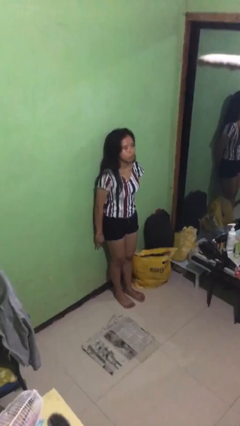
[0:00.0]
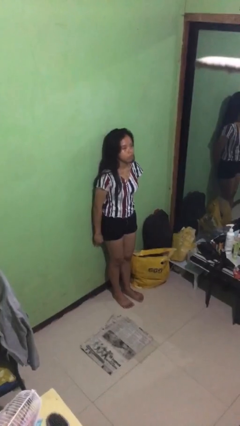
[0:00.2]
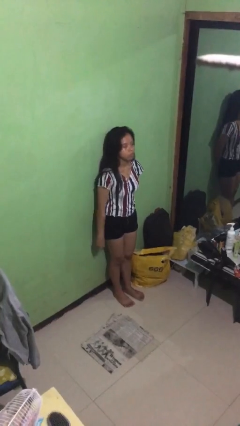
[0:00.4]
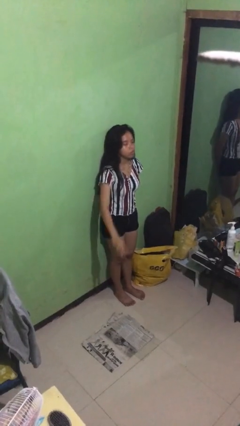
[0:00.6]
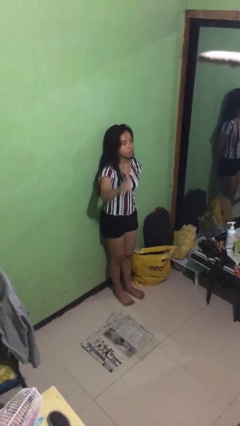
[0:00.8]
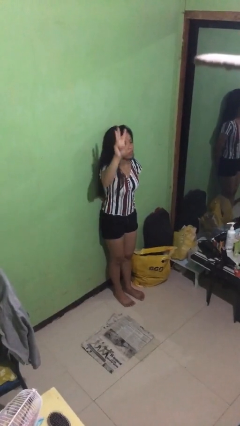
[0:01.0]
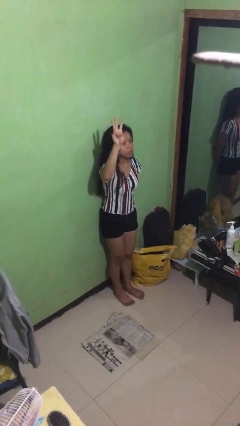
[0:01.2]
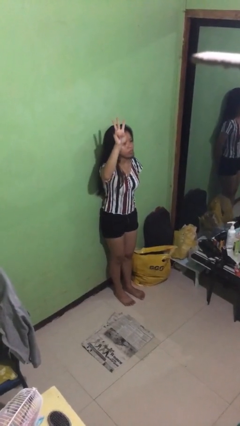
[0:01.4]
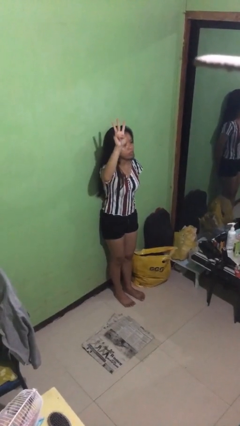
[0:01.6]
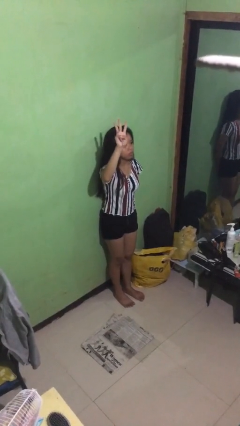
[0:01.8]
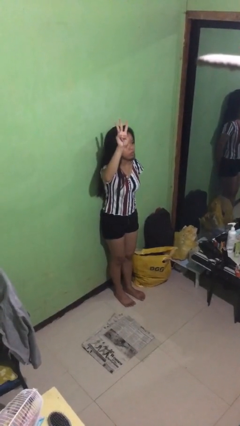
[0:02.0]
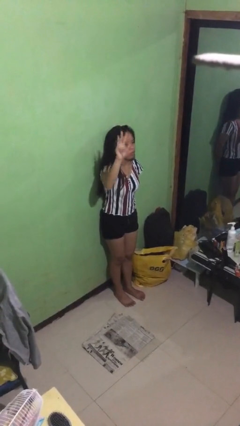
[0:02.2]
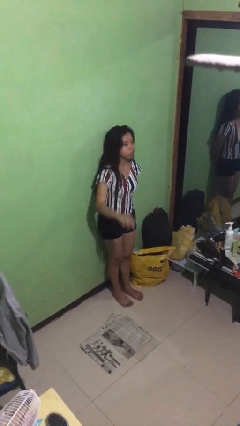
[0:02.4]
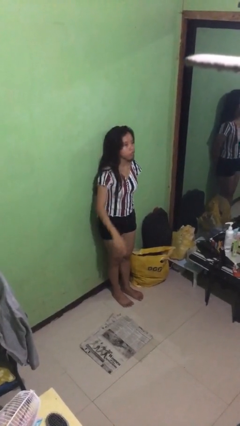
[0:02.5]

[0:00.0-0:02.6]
person gestures number three

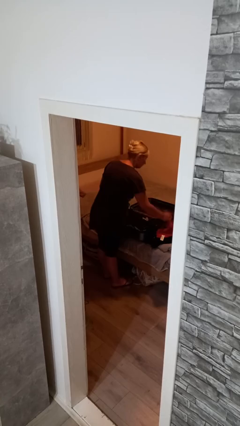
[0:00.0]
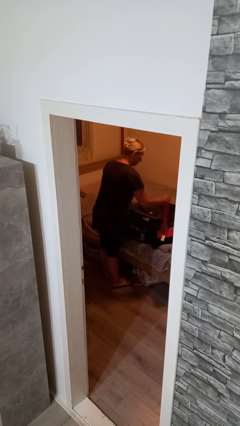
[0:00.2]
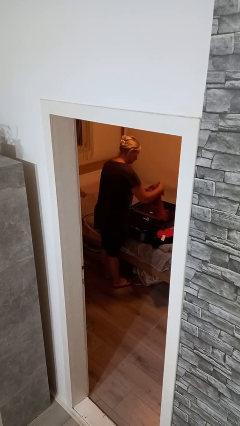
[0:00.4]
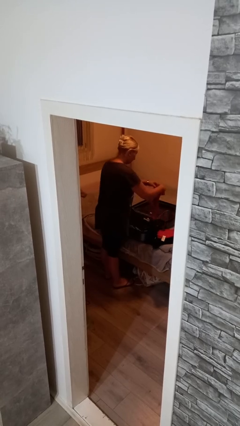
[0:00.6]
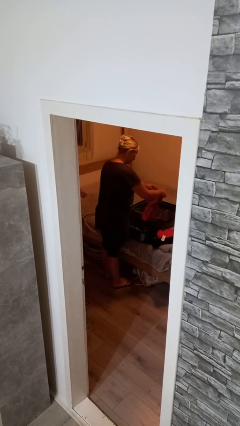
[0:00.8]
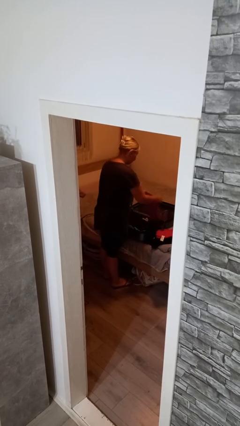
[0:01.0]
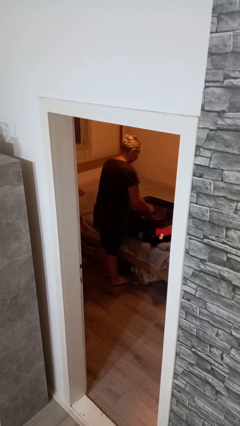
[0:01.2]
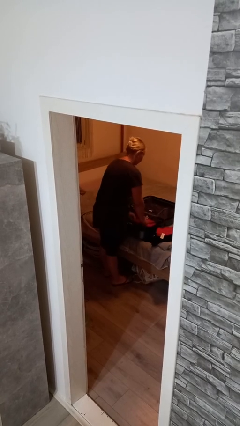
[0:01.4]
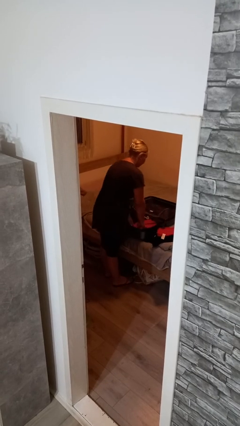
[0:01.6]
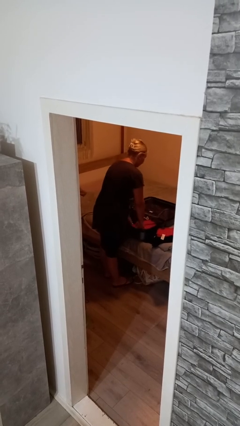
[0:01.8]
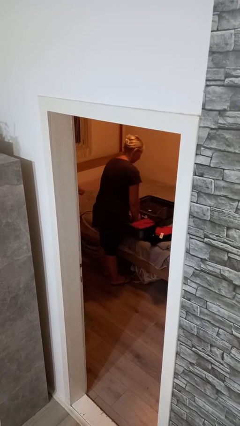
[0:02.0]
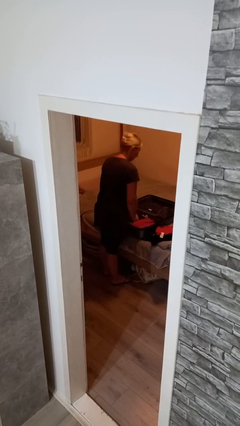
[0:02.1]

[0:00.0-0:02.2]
person loads clothes into suitcase

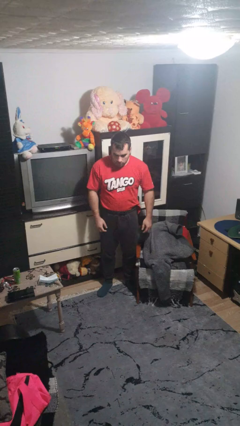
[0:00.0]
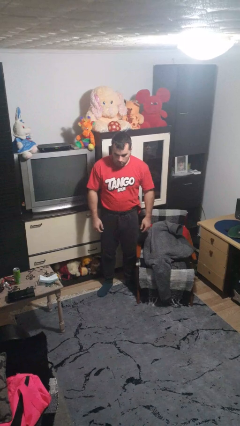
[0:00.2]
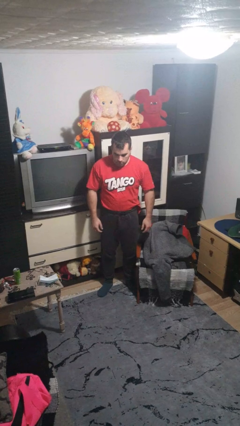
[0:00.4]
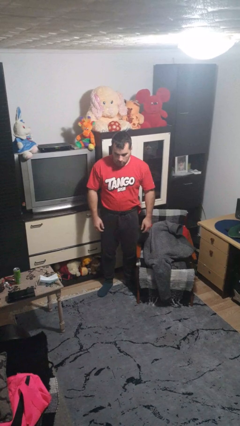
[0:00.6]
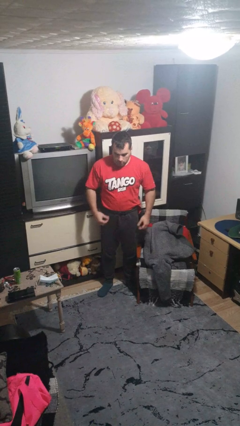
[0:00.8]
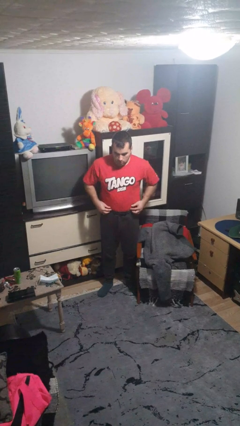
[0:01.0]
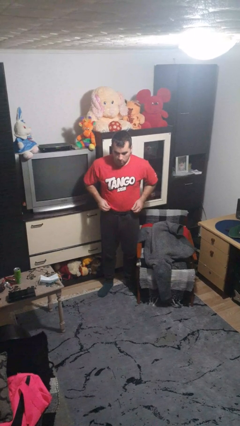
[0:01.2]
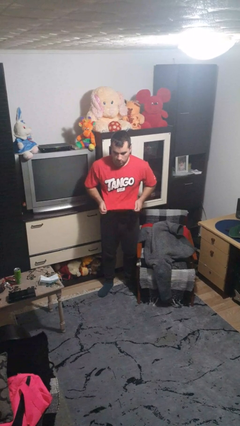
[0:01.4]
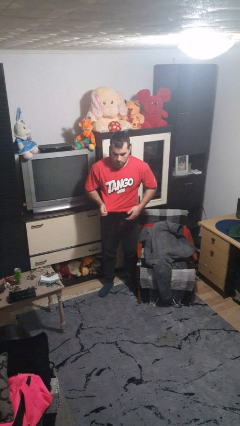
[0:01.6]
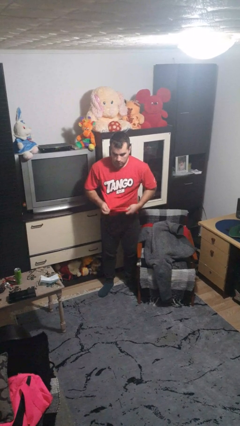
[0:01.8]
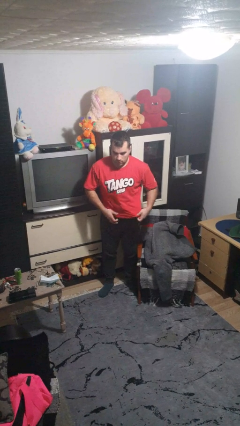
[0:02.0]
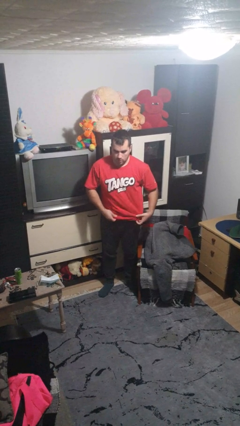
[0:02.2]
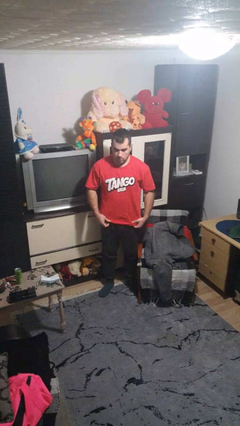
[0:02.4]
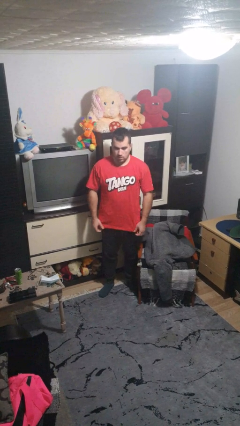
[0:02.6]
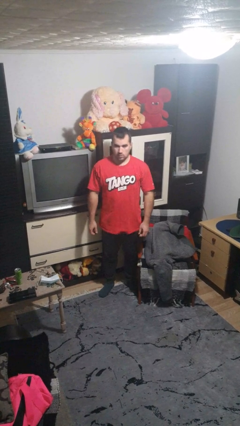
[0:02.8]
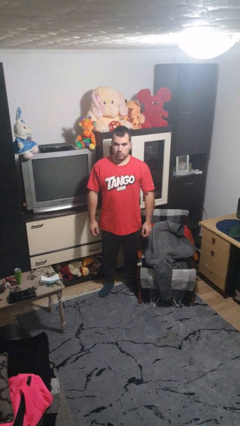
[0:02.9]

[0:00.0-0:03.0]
person untucks shirt

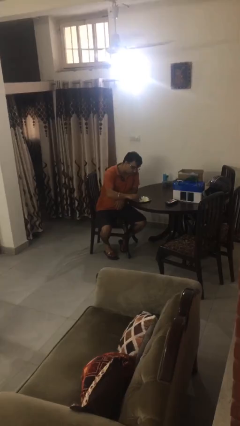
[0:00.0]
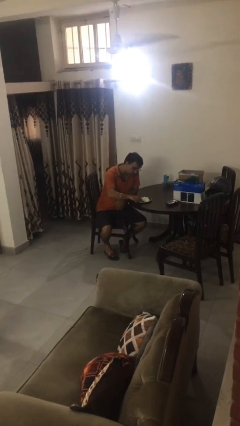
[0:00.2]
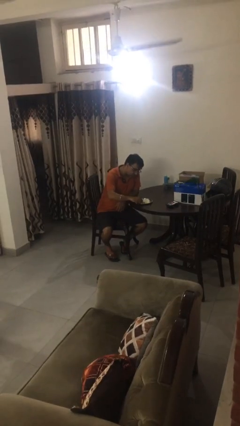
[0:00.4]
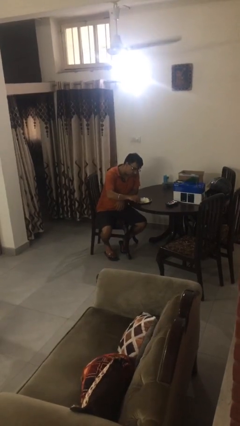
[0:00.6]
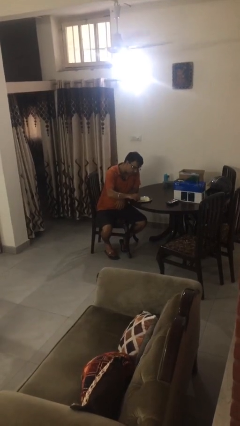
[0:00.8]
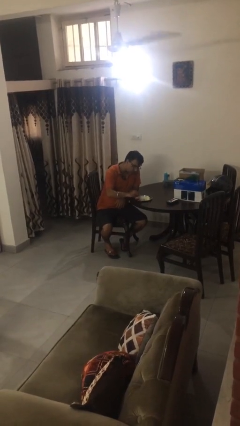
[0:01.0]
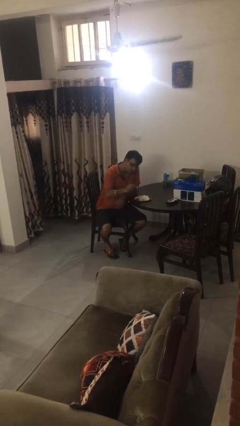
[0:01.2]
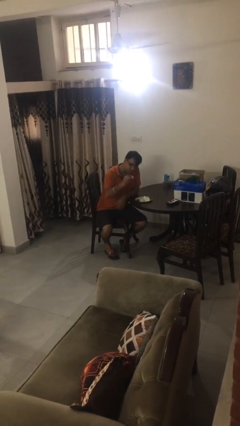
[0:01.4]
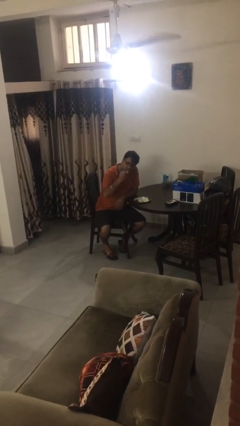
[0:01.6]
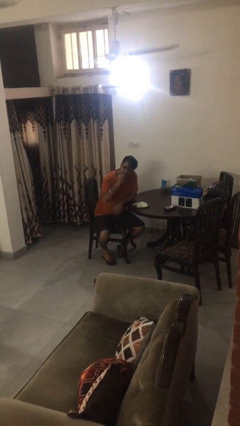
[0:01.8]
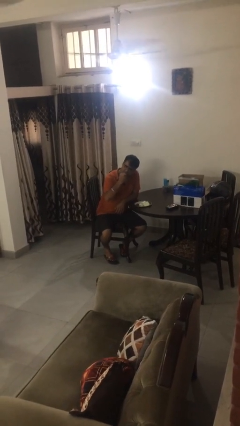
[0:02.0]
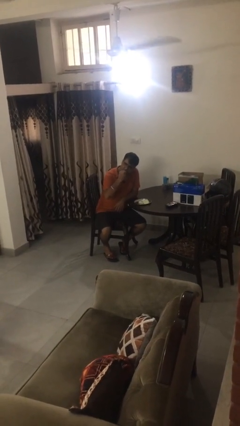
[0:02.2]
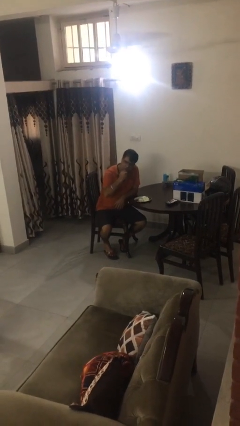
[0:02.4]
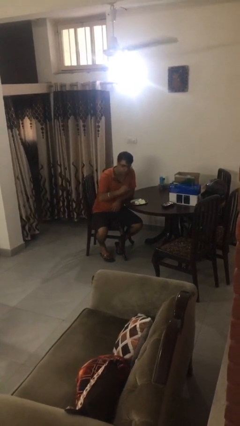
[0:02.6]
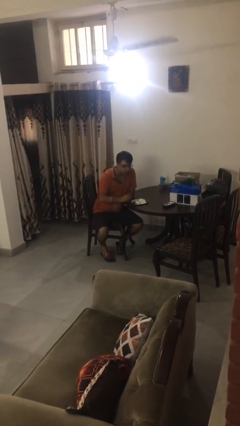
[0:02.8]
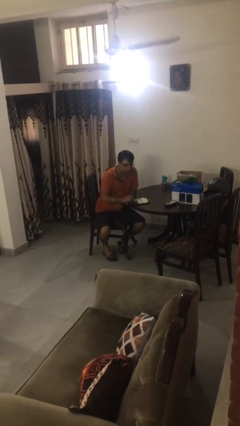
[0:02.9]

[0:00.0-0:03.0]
person eats with hands

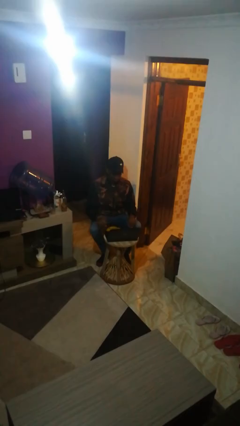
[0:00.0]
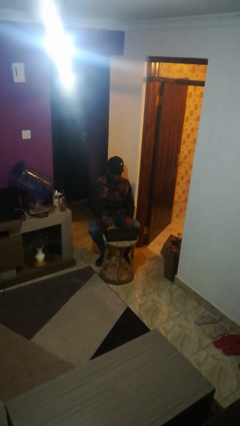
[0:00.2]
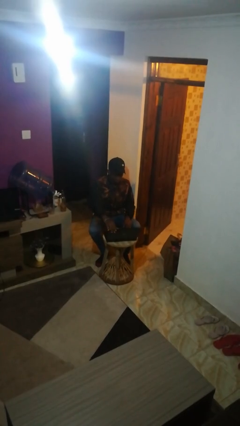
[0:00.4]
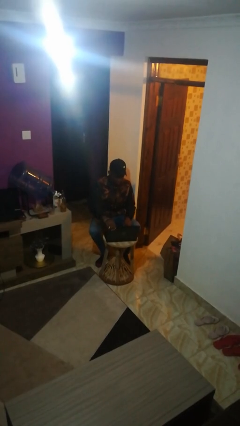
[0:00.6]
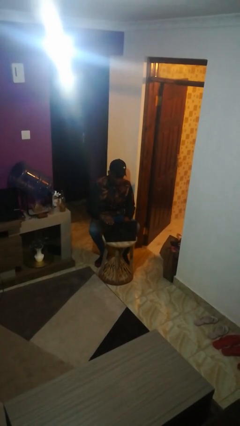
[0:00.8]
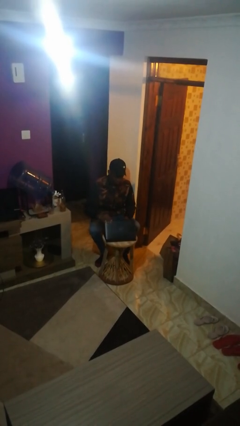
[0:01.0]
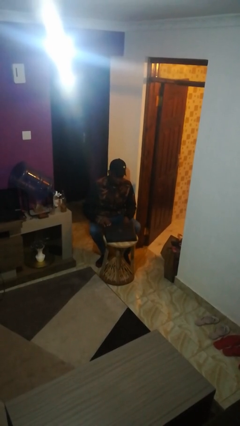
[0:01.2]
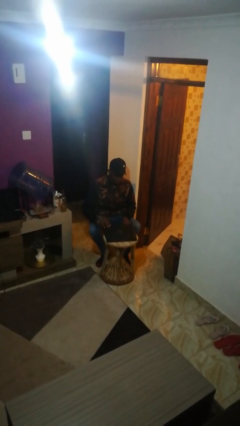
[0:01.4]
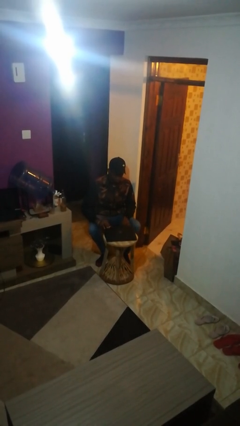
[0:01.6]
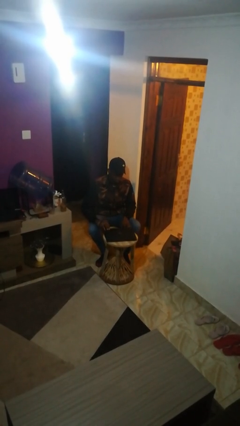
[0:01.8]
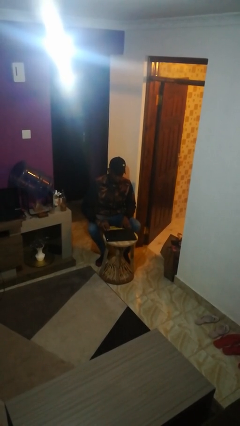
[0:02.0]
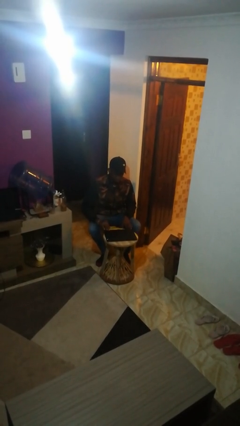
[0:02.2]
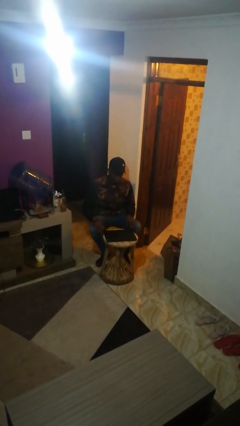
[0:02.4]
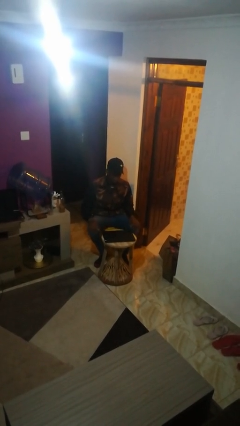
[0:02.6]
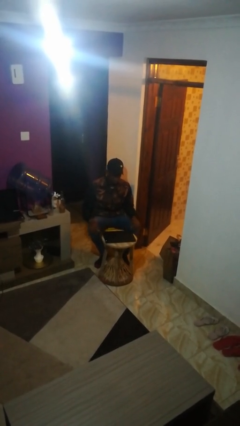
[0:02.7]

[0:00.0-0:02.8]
person closes laptop

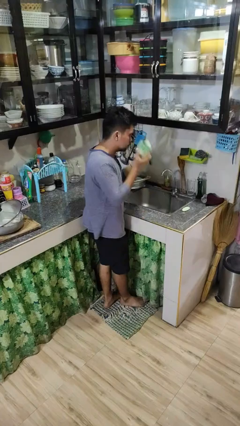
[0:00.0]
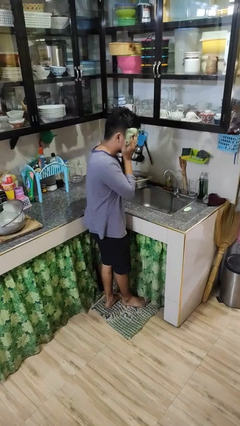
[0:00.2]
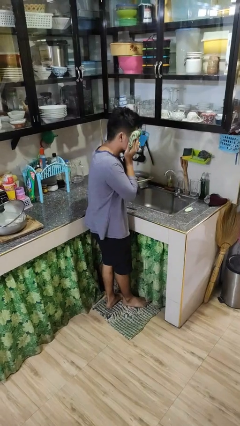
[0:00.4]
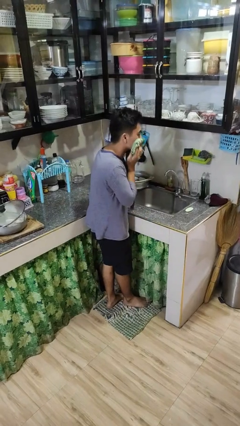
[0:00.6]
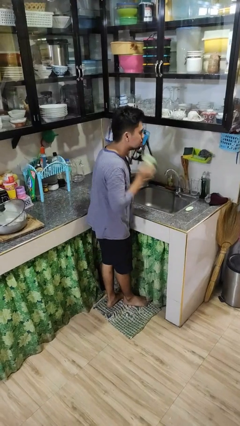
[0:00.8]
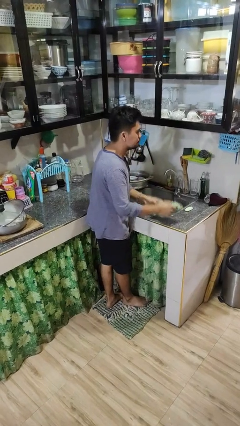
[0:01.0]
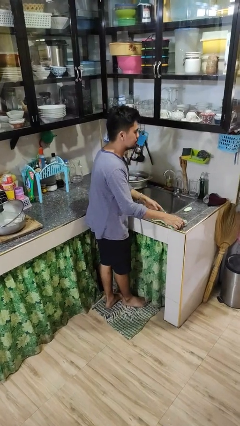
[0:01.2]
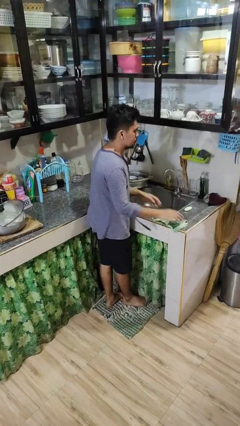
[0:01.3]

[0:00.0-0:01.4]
person dries face with towel

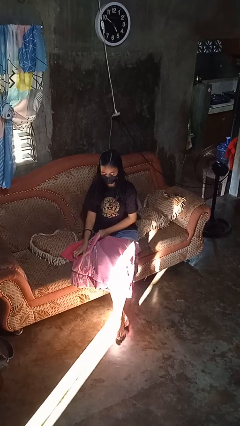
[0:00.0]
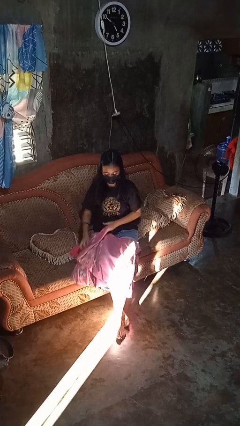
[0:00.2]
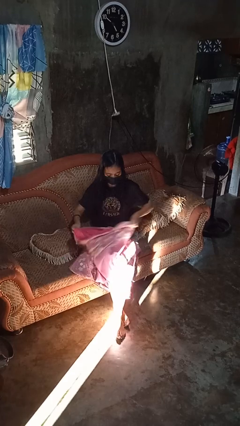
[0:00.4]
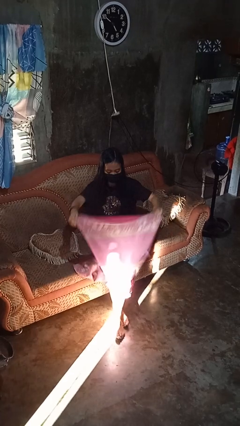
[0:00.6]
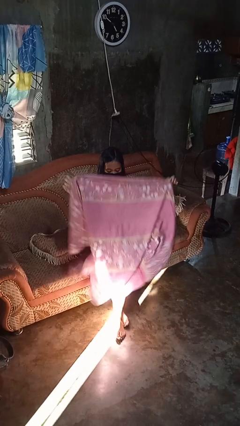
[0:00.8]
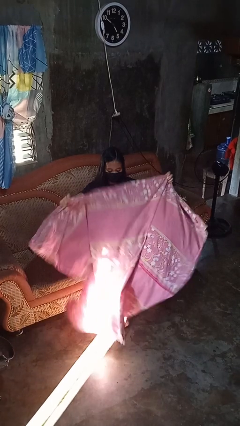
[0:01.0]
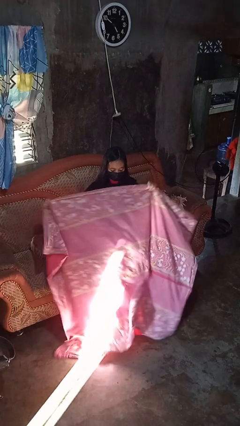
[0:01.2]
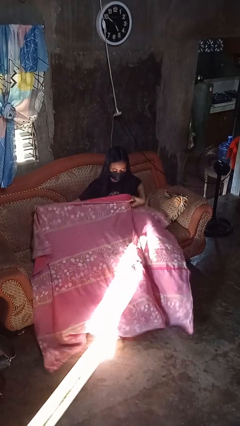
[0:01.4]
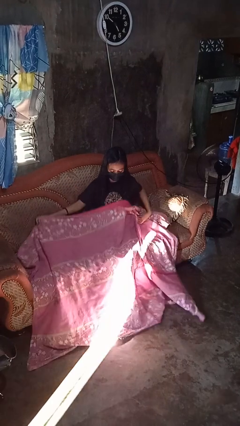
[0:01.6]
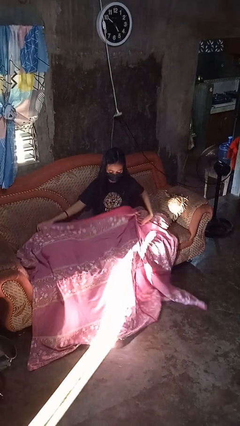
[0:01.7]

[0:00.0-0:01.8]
person unfolds blanket

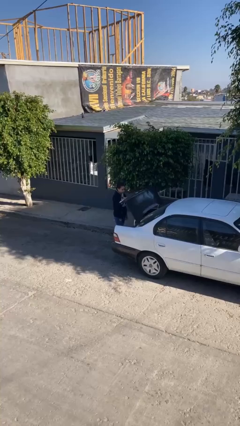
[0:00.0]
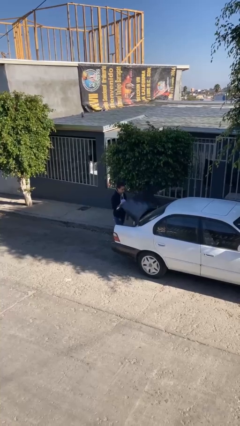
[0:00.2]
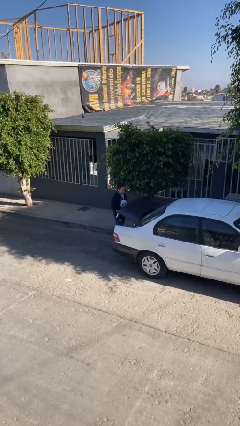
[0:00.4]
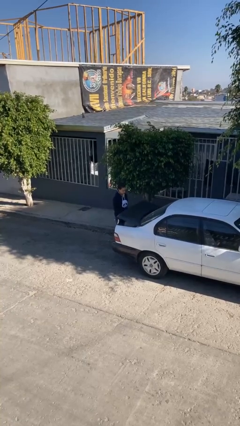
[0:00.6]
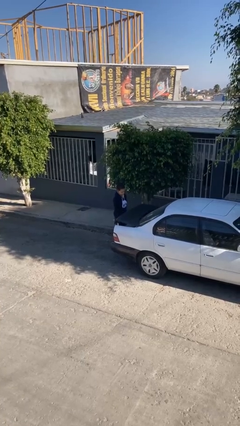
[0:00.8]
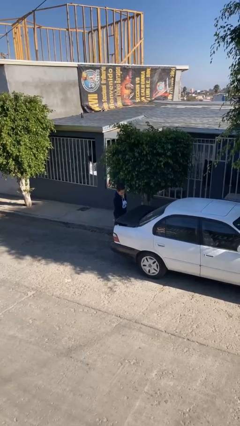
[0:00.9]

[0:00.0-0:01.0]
person closes car trunk
